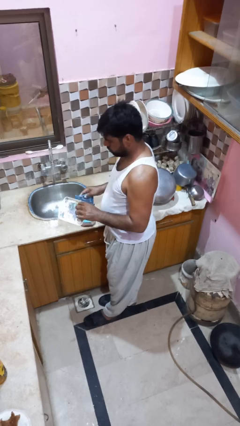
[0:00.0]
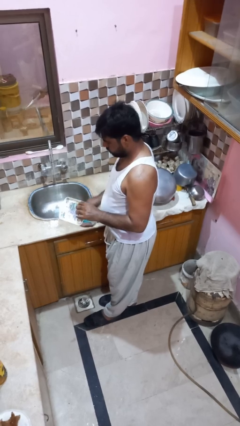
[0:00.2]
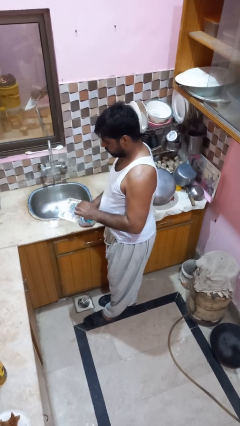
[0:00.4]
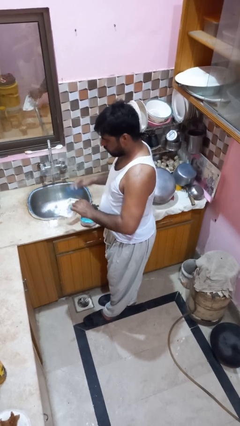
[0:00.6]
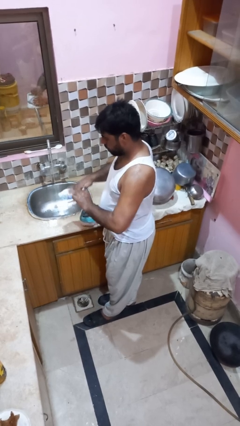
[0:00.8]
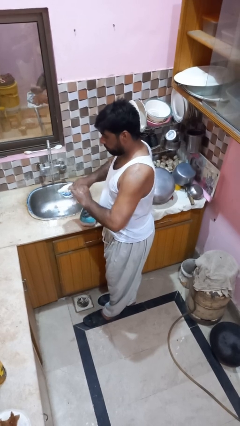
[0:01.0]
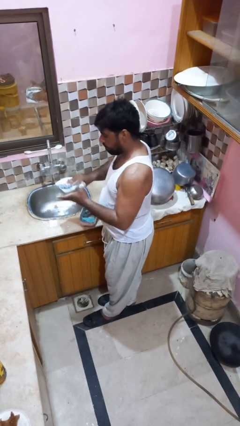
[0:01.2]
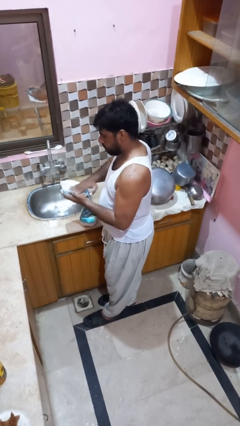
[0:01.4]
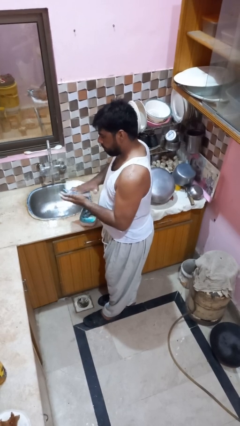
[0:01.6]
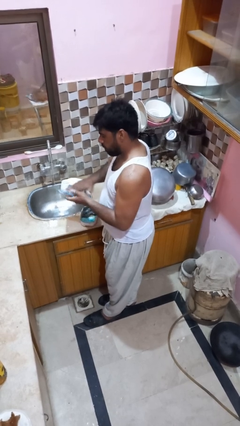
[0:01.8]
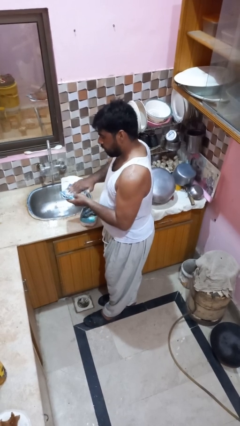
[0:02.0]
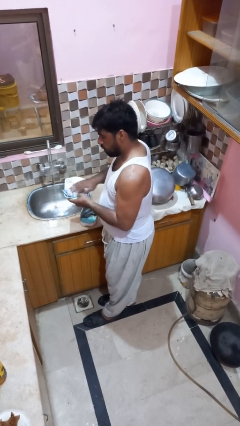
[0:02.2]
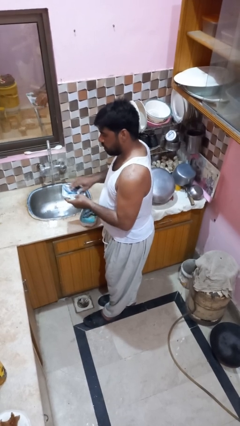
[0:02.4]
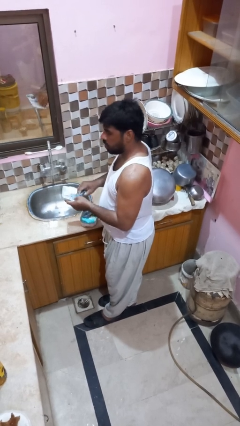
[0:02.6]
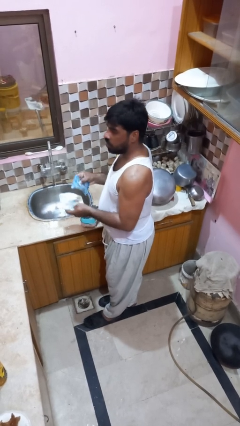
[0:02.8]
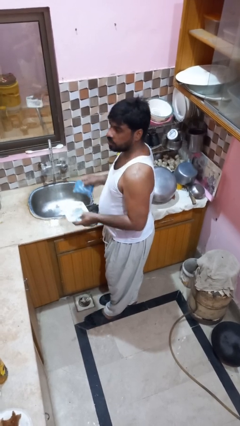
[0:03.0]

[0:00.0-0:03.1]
person washes dish

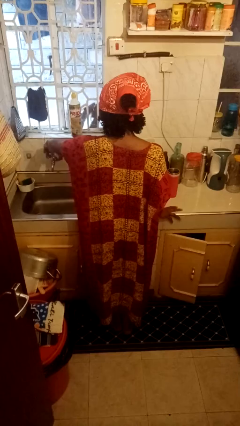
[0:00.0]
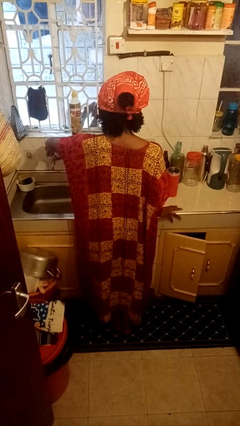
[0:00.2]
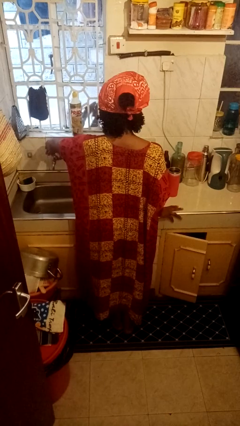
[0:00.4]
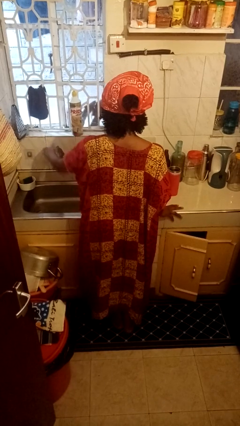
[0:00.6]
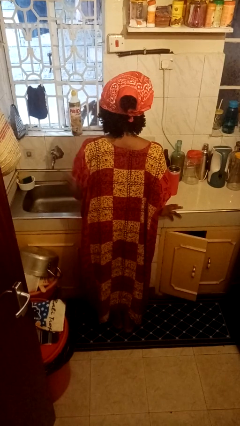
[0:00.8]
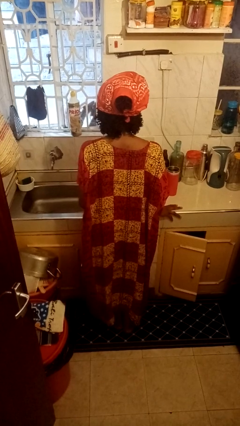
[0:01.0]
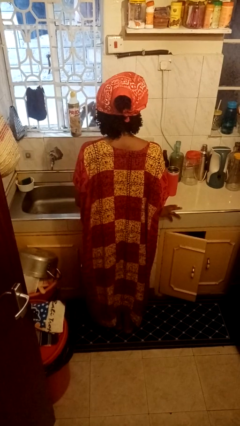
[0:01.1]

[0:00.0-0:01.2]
person turns off faucet

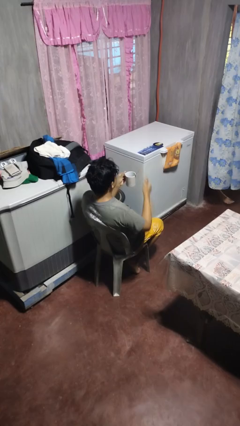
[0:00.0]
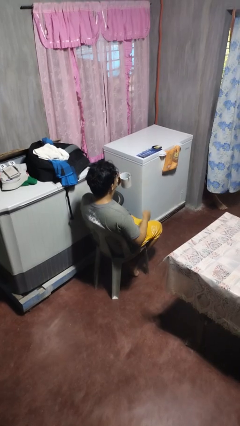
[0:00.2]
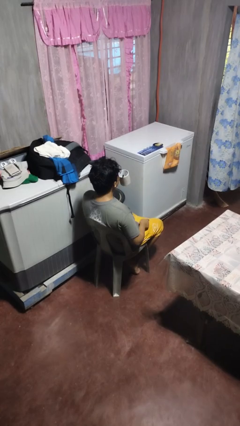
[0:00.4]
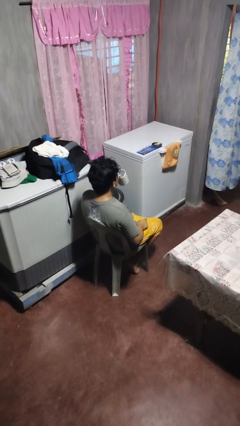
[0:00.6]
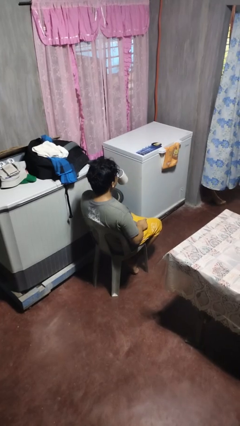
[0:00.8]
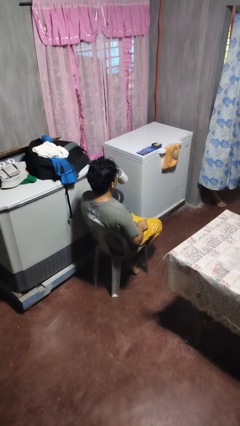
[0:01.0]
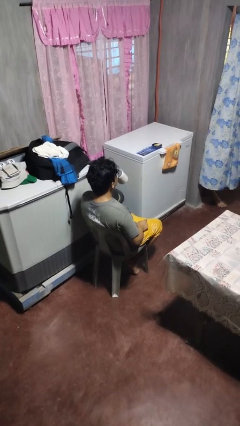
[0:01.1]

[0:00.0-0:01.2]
person drinks from mug

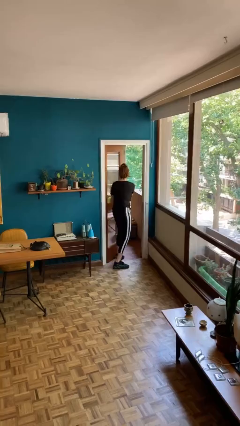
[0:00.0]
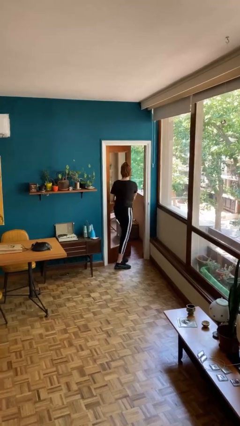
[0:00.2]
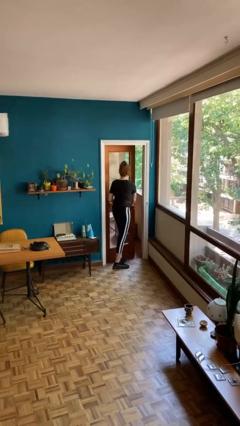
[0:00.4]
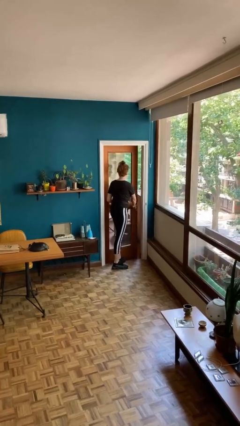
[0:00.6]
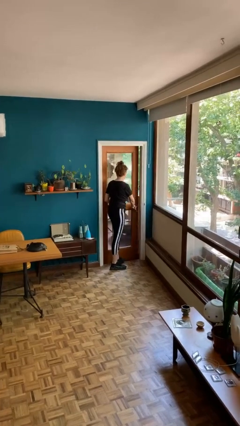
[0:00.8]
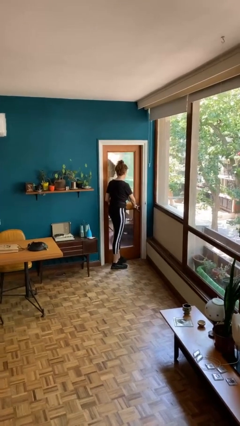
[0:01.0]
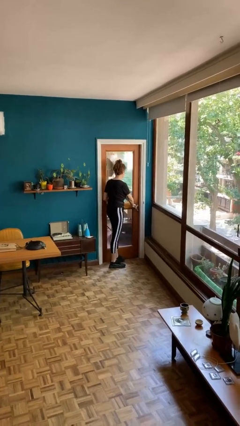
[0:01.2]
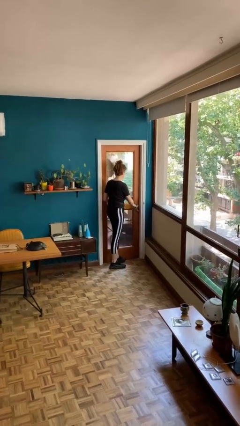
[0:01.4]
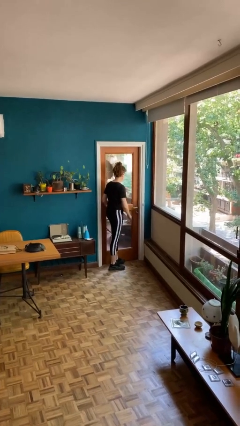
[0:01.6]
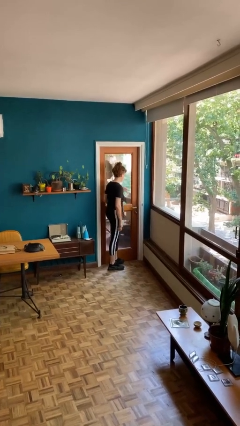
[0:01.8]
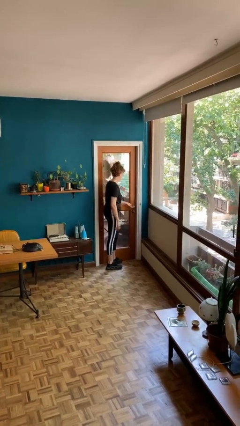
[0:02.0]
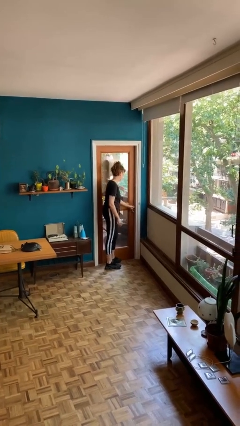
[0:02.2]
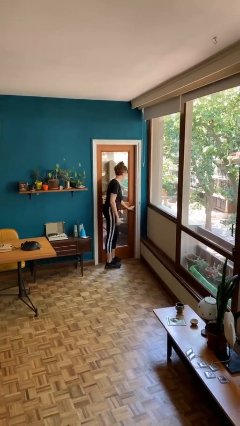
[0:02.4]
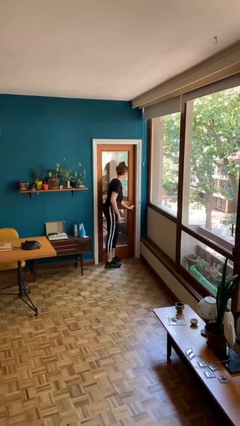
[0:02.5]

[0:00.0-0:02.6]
person closes facility door

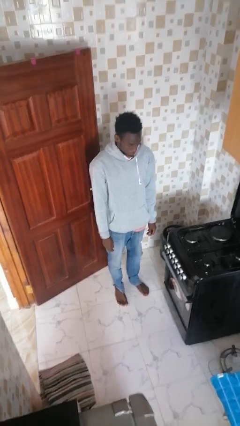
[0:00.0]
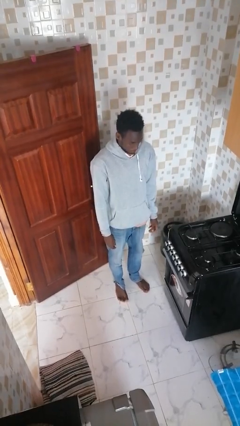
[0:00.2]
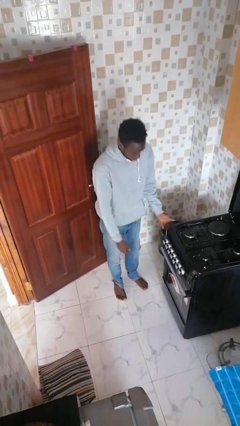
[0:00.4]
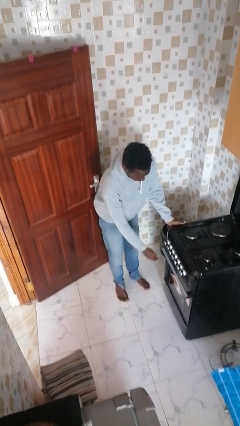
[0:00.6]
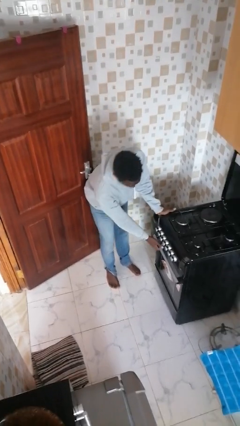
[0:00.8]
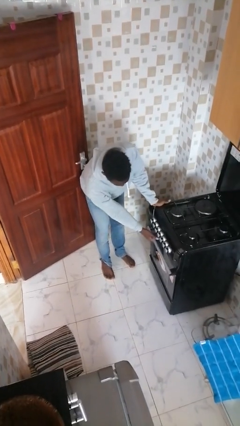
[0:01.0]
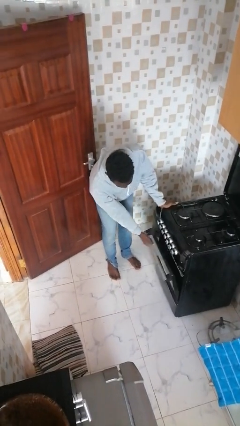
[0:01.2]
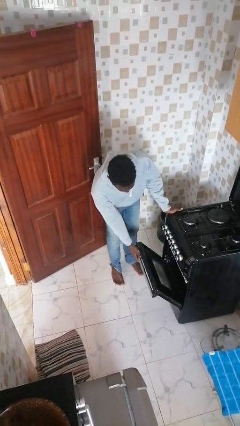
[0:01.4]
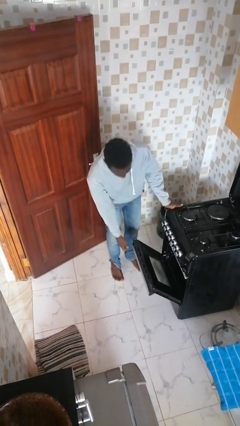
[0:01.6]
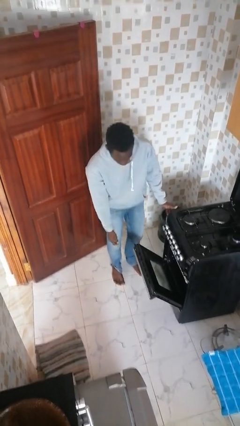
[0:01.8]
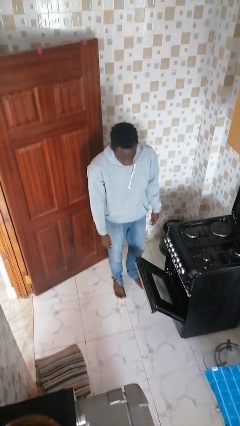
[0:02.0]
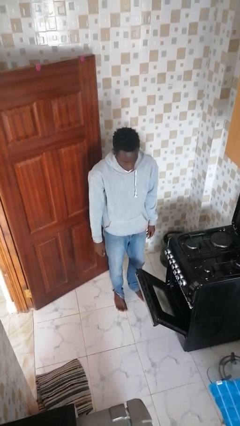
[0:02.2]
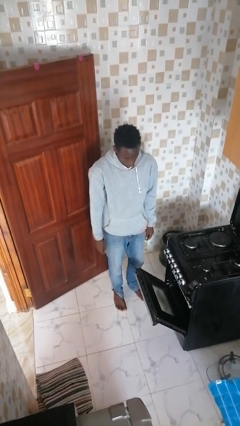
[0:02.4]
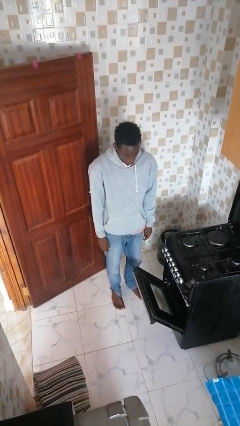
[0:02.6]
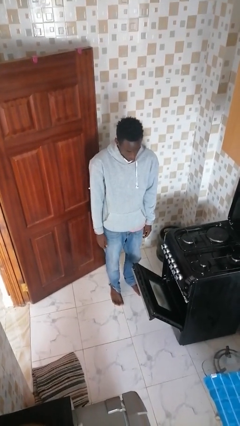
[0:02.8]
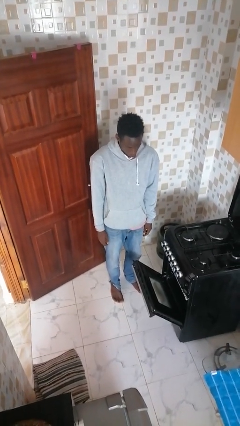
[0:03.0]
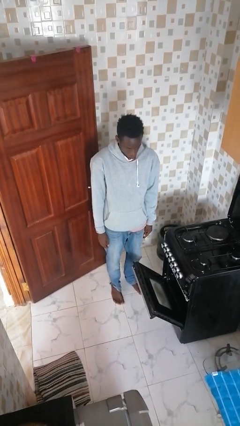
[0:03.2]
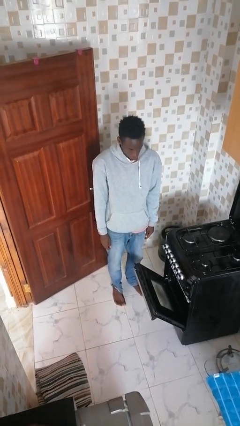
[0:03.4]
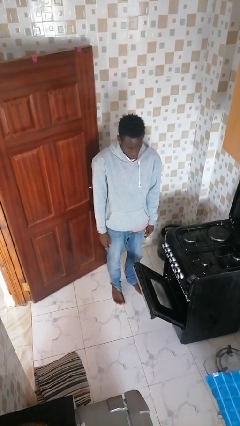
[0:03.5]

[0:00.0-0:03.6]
person opens oven door

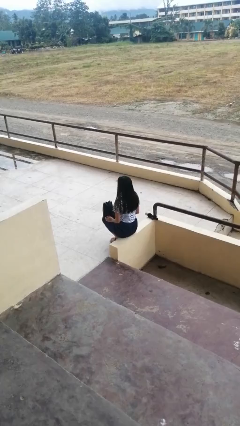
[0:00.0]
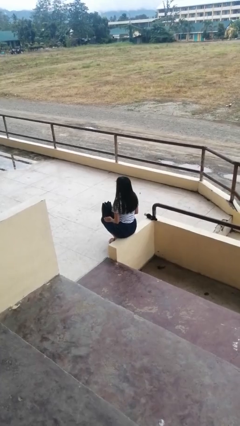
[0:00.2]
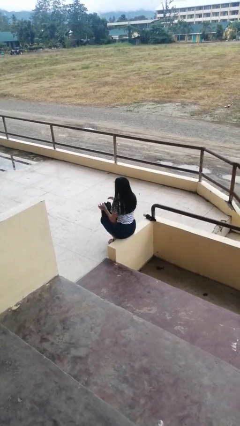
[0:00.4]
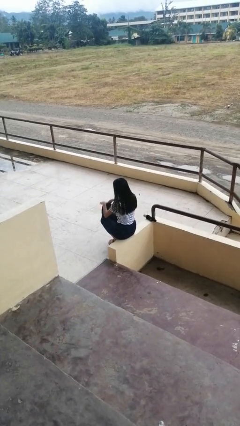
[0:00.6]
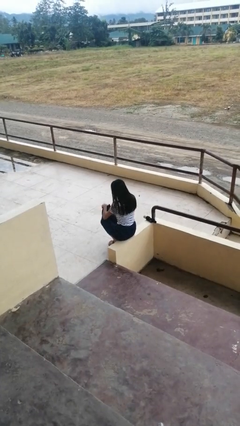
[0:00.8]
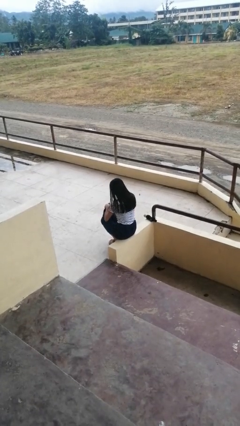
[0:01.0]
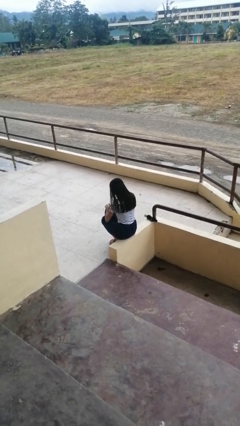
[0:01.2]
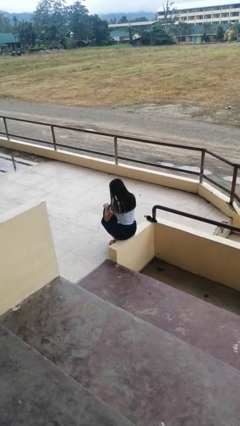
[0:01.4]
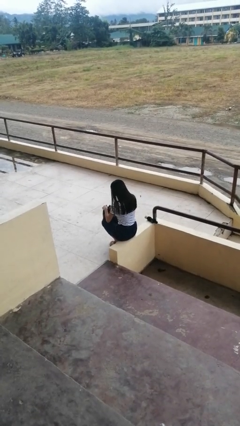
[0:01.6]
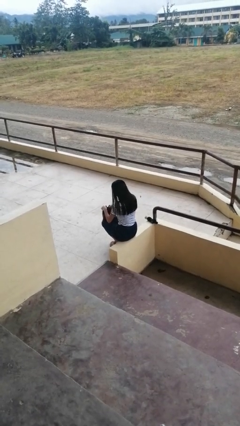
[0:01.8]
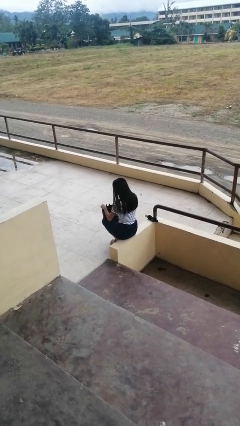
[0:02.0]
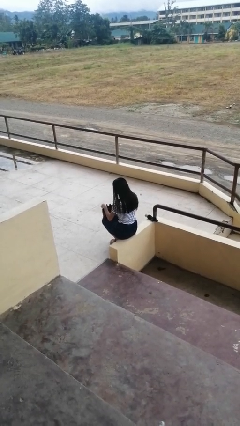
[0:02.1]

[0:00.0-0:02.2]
person searches in bag

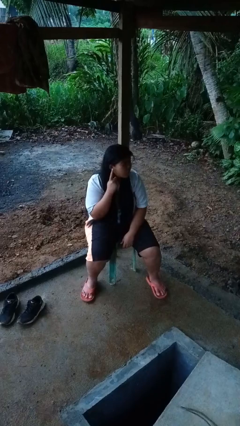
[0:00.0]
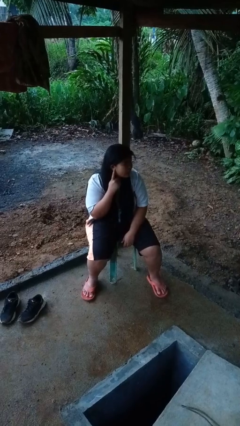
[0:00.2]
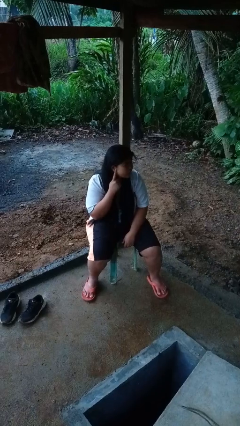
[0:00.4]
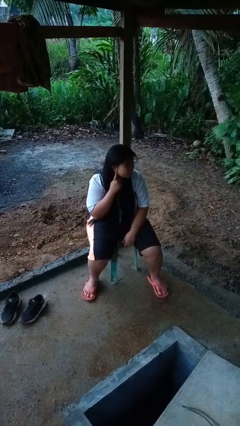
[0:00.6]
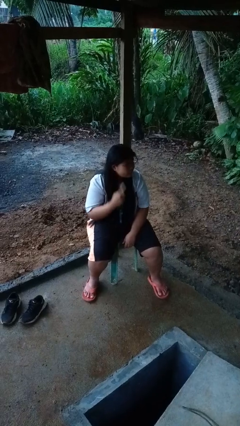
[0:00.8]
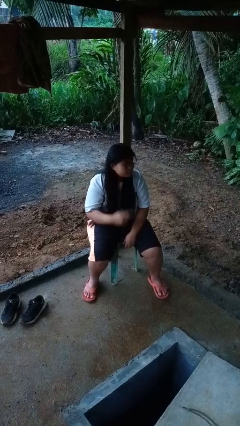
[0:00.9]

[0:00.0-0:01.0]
person gestures listen closely

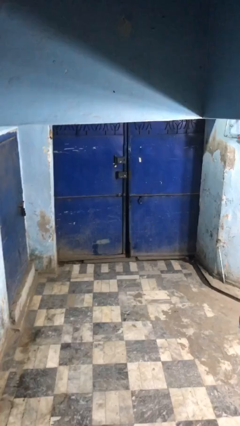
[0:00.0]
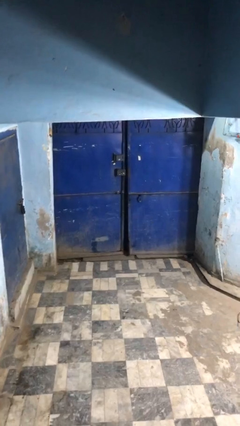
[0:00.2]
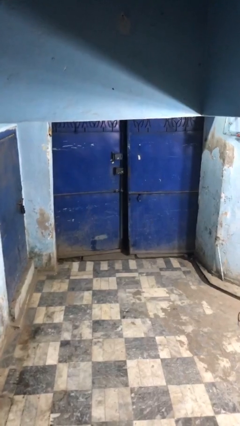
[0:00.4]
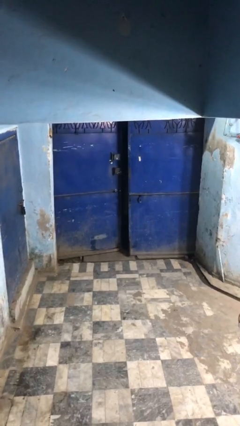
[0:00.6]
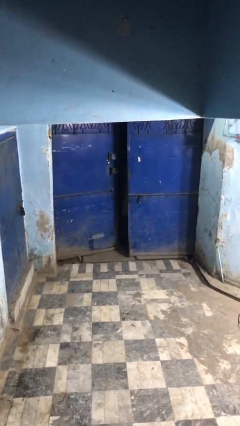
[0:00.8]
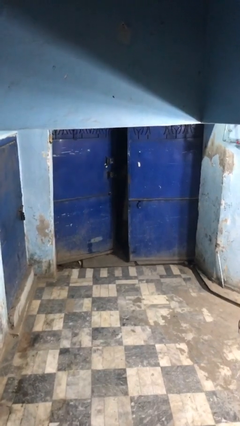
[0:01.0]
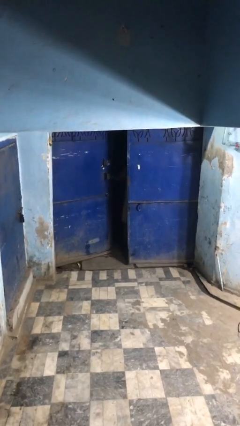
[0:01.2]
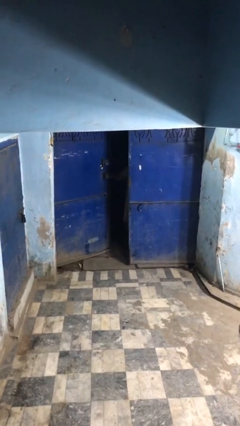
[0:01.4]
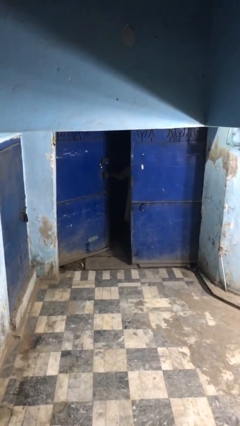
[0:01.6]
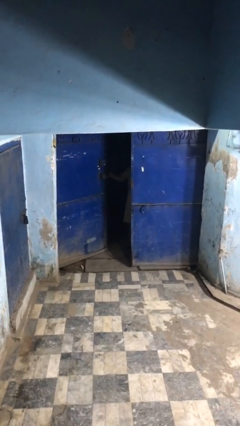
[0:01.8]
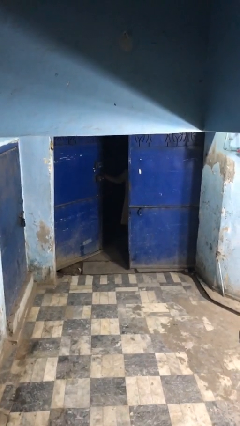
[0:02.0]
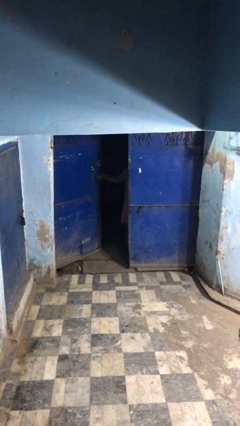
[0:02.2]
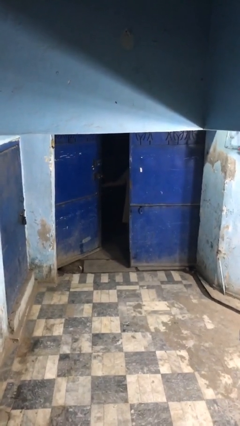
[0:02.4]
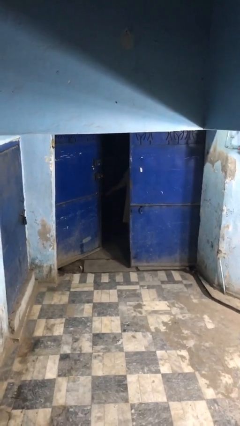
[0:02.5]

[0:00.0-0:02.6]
person opens facility door
